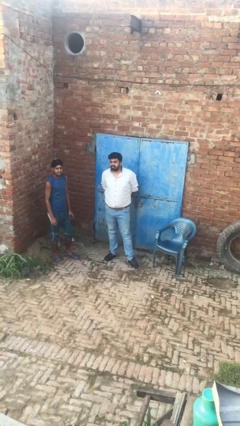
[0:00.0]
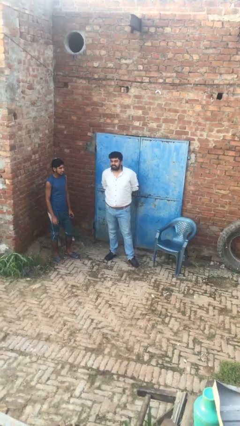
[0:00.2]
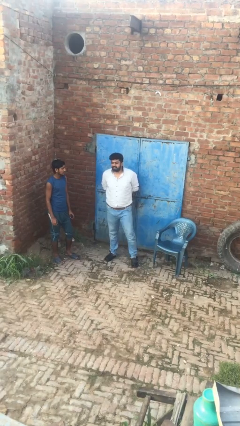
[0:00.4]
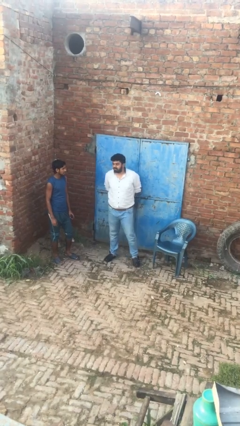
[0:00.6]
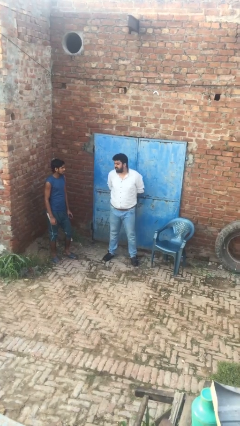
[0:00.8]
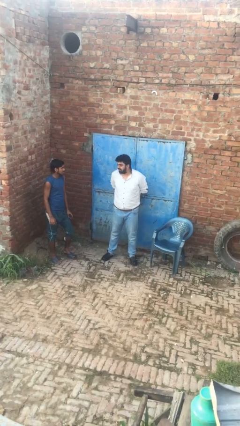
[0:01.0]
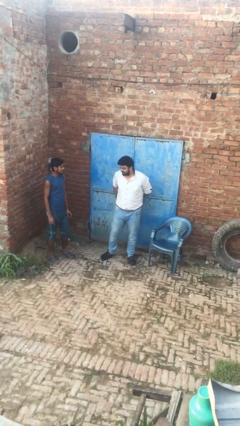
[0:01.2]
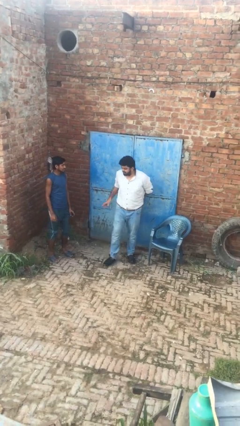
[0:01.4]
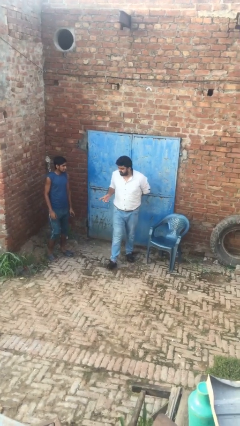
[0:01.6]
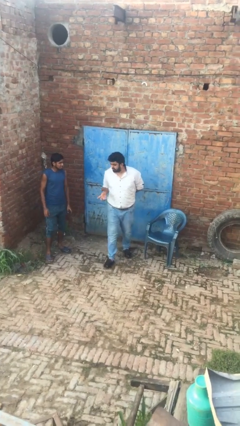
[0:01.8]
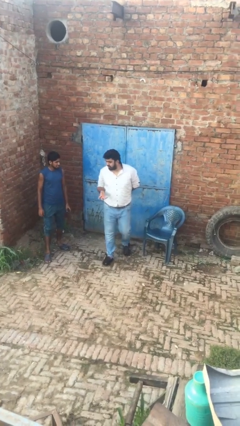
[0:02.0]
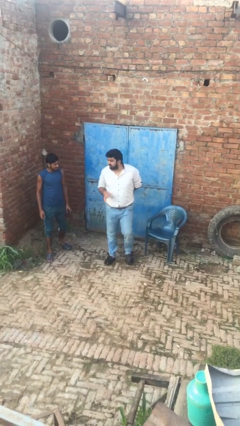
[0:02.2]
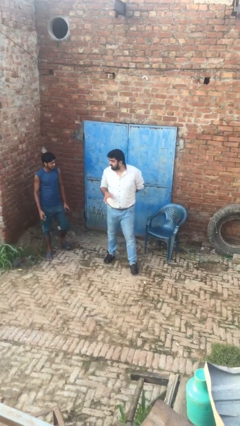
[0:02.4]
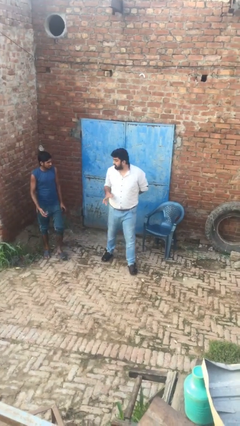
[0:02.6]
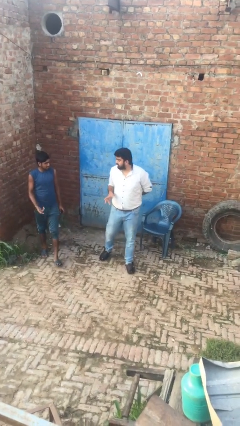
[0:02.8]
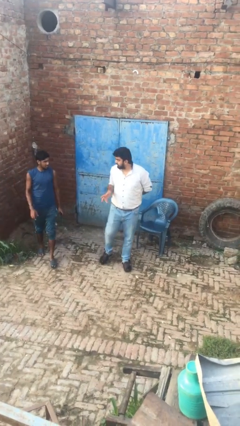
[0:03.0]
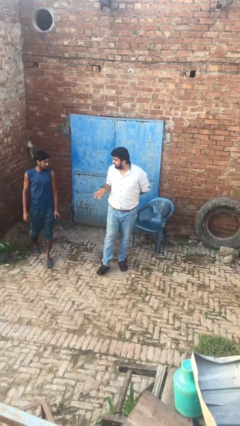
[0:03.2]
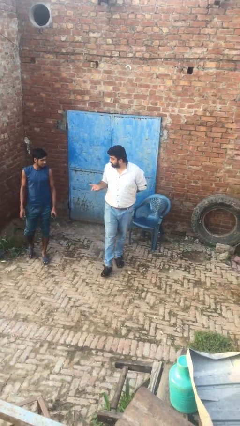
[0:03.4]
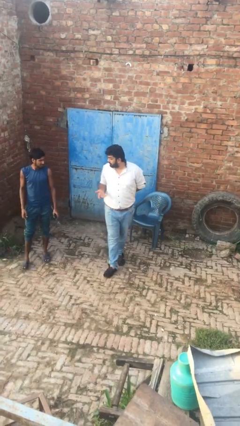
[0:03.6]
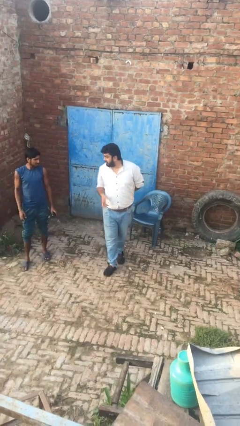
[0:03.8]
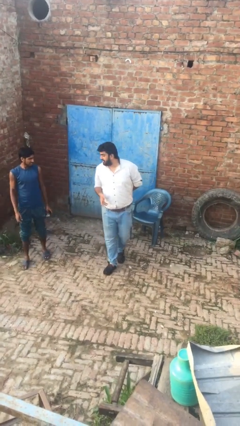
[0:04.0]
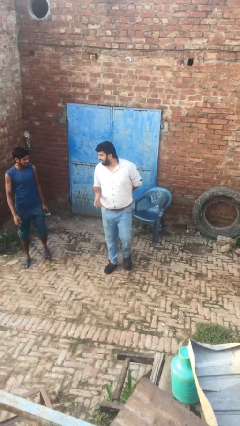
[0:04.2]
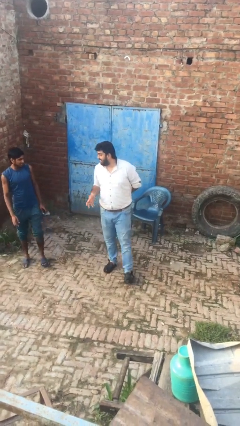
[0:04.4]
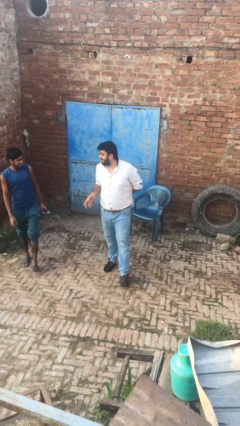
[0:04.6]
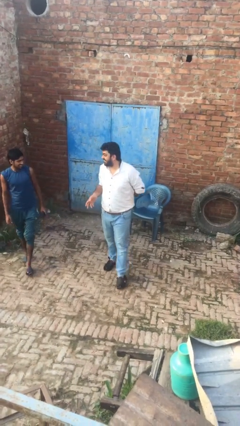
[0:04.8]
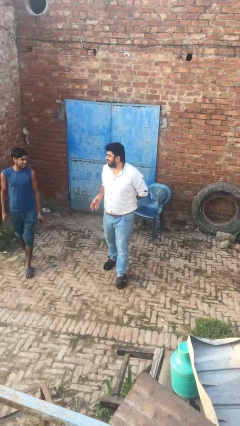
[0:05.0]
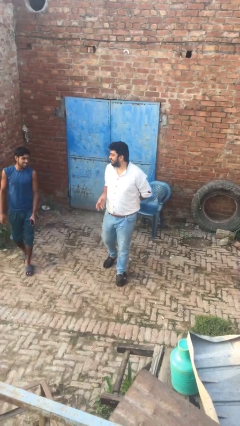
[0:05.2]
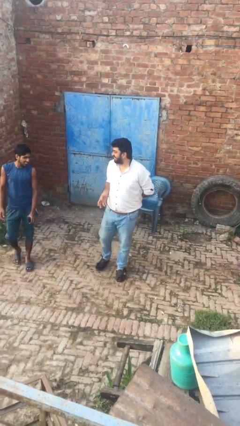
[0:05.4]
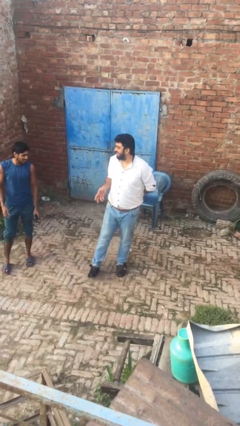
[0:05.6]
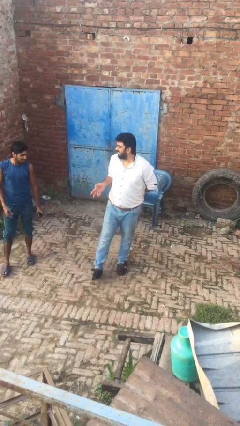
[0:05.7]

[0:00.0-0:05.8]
person talks to person

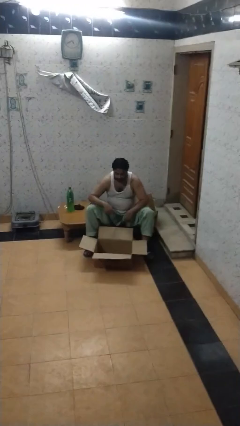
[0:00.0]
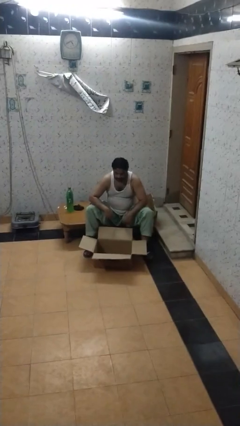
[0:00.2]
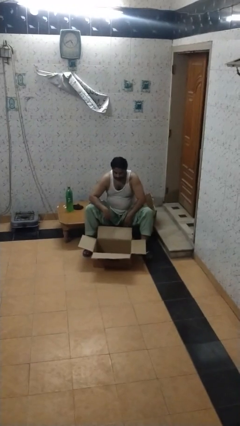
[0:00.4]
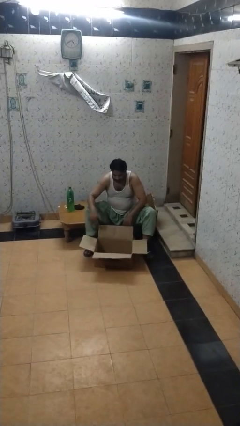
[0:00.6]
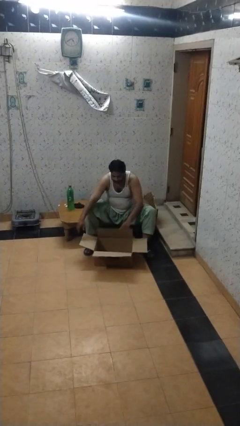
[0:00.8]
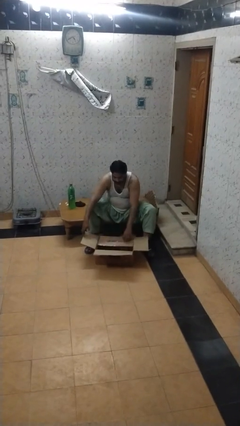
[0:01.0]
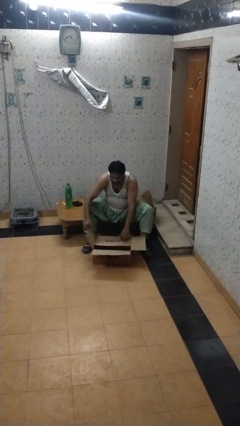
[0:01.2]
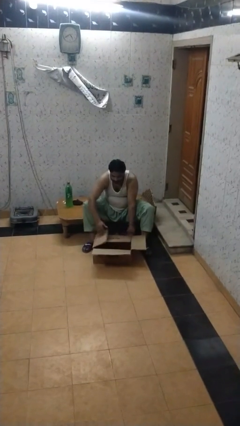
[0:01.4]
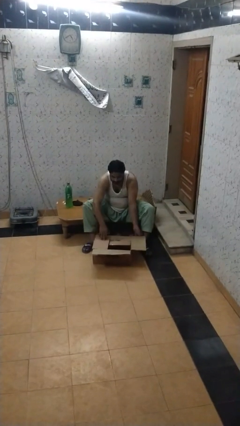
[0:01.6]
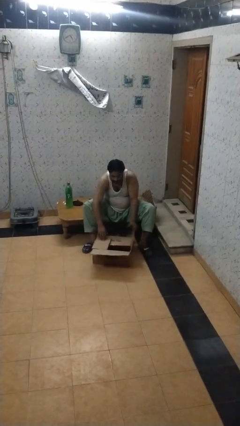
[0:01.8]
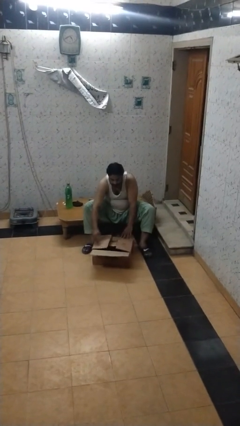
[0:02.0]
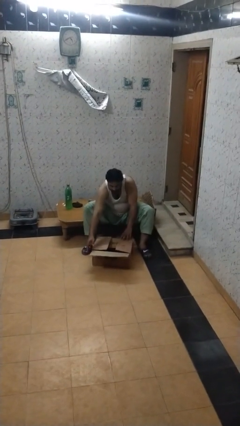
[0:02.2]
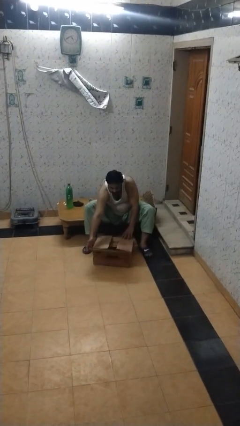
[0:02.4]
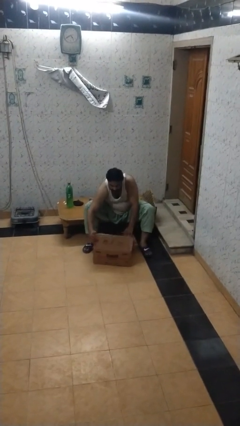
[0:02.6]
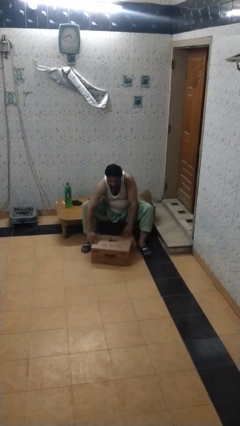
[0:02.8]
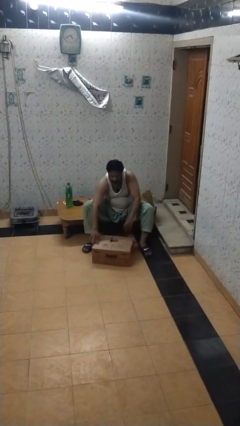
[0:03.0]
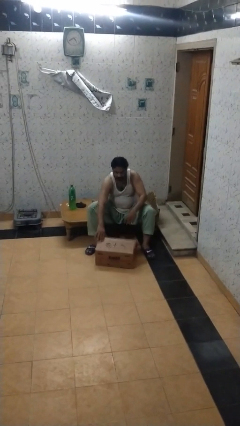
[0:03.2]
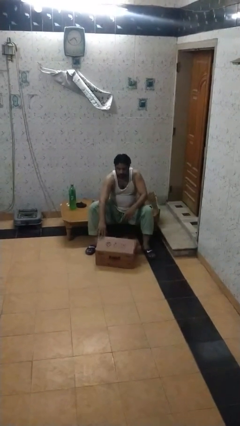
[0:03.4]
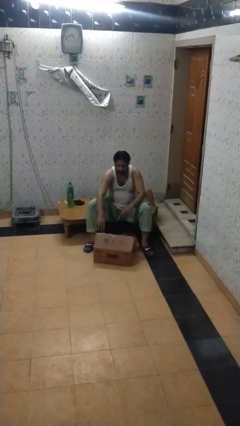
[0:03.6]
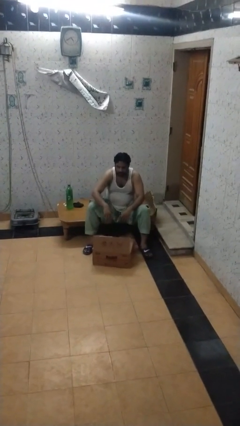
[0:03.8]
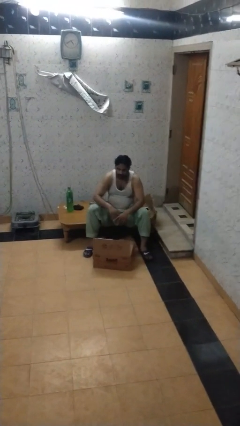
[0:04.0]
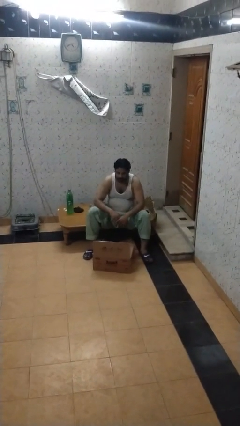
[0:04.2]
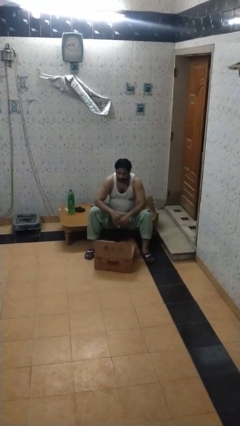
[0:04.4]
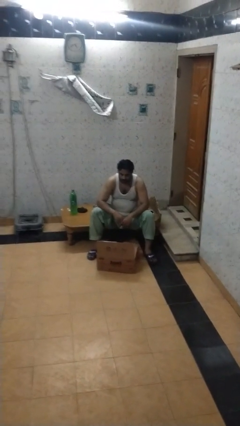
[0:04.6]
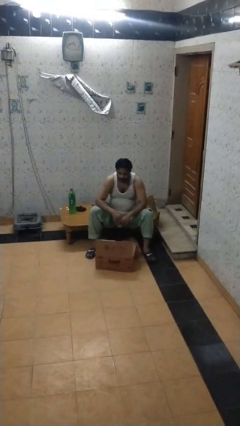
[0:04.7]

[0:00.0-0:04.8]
person closes box

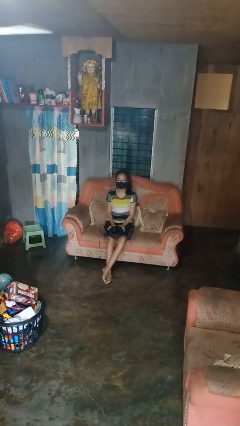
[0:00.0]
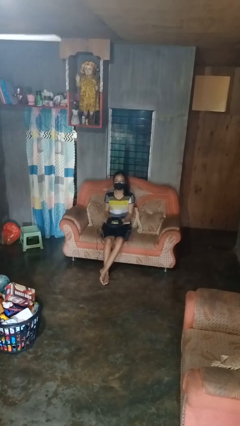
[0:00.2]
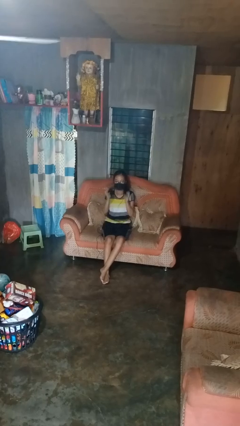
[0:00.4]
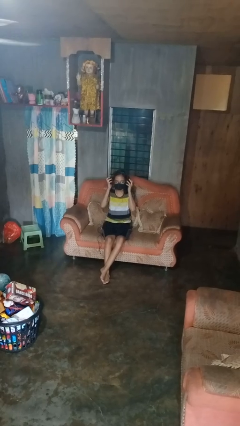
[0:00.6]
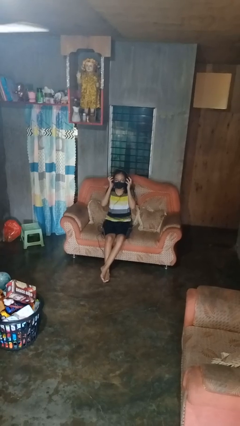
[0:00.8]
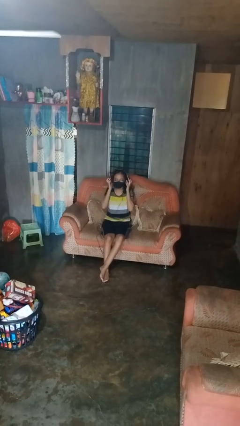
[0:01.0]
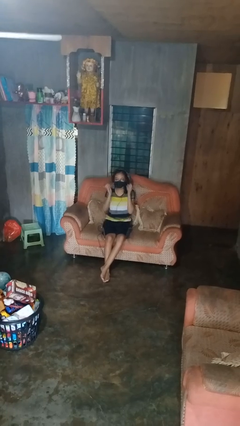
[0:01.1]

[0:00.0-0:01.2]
person puts on headphones

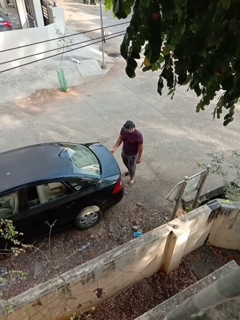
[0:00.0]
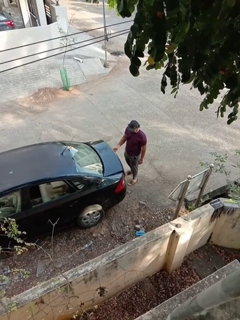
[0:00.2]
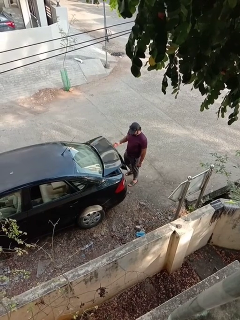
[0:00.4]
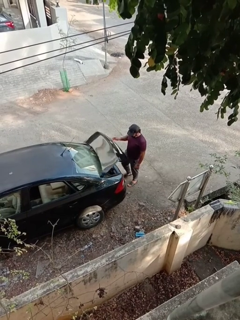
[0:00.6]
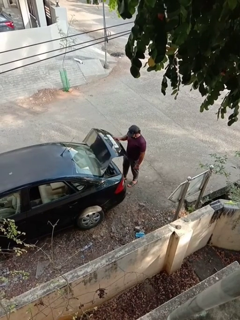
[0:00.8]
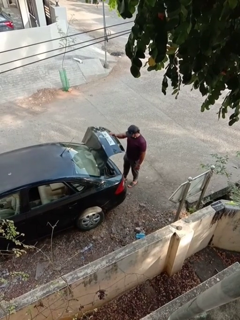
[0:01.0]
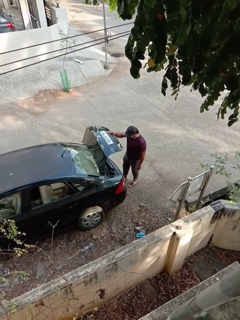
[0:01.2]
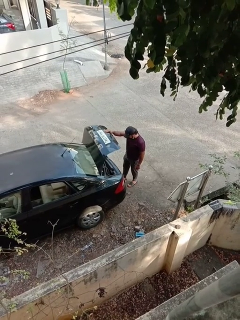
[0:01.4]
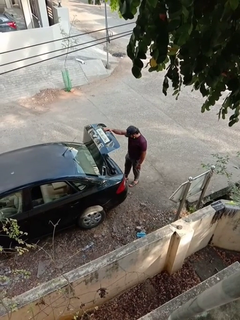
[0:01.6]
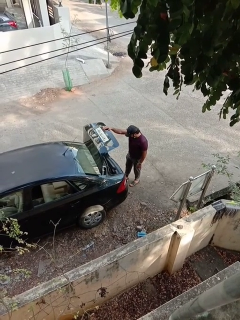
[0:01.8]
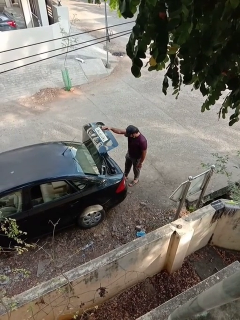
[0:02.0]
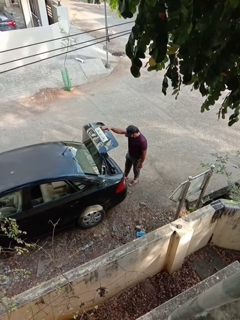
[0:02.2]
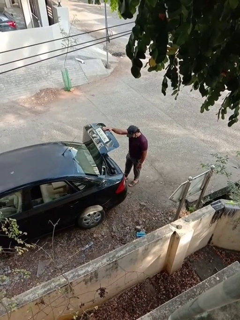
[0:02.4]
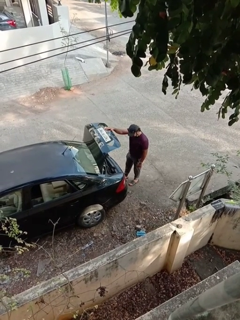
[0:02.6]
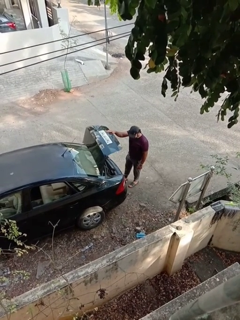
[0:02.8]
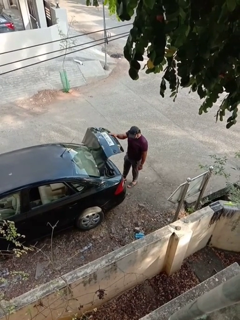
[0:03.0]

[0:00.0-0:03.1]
person opens car trunk

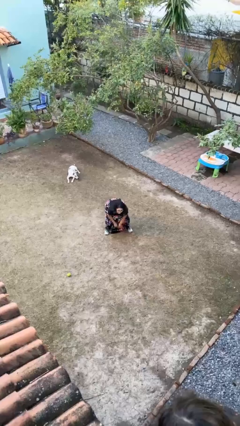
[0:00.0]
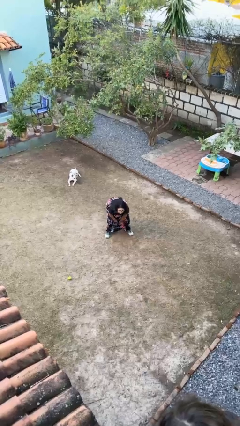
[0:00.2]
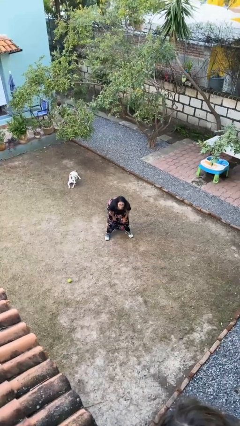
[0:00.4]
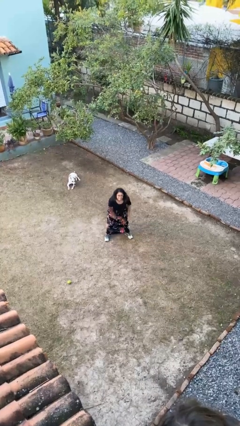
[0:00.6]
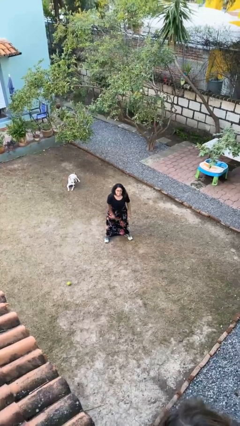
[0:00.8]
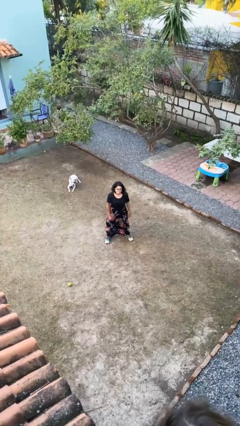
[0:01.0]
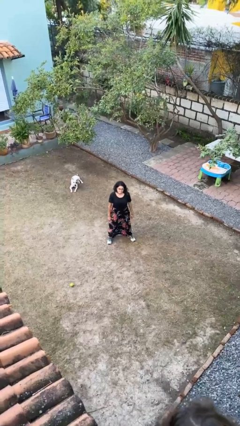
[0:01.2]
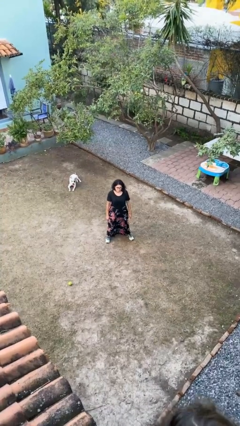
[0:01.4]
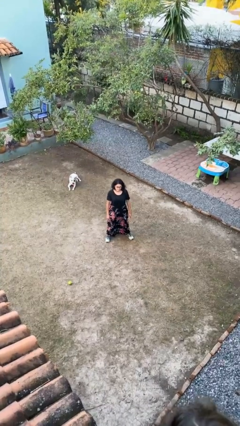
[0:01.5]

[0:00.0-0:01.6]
person stands up

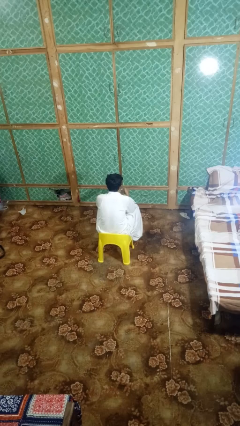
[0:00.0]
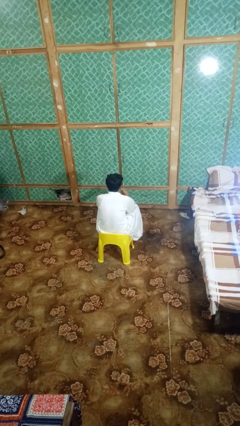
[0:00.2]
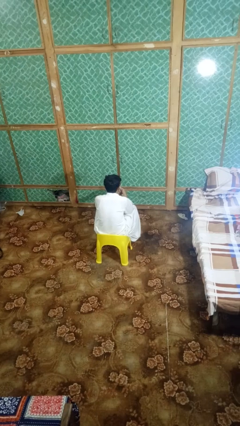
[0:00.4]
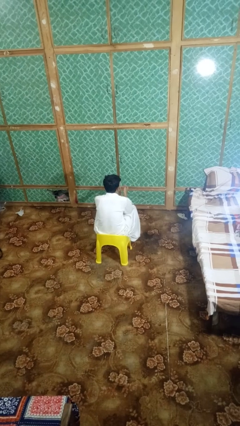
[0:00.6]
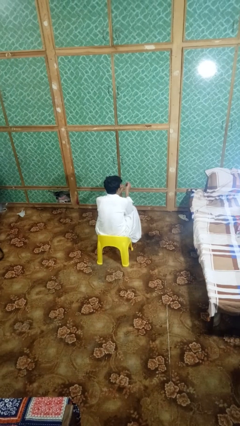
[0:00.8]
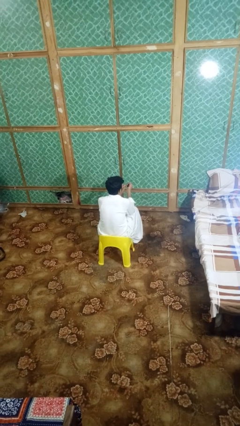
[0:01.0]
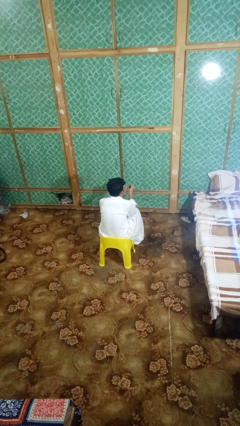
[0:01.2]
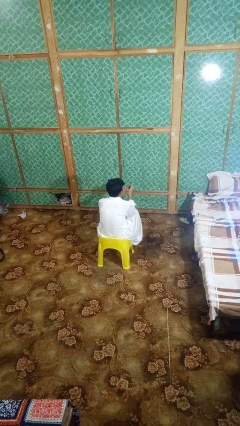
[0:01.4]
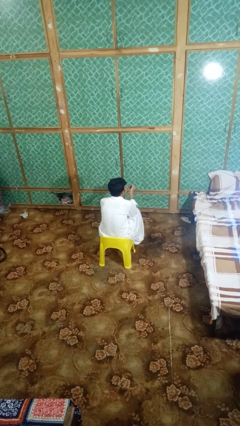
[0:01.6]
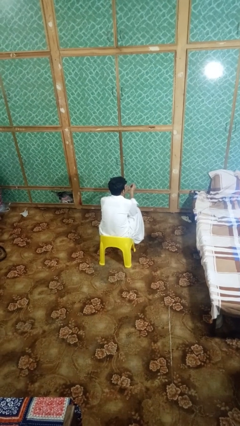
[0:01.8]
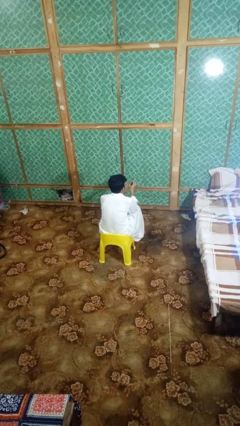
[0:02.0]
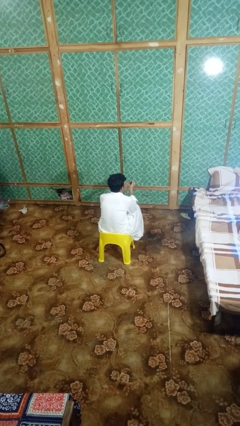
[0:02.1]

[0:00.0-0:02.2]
person files fingernails
